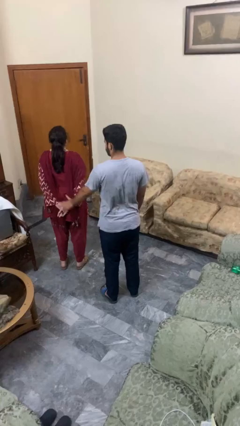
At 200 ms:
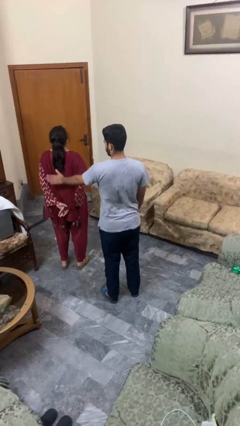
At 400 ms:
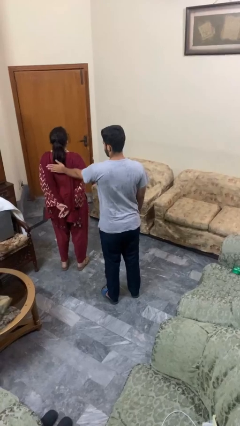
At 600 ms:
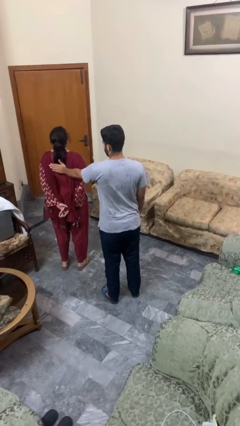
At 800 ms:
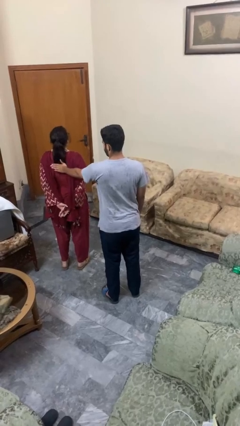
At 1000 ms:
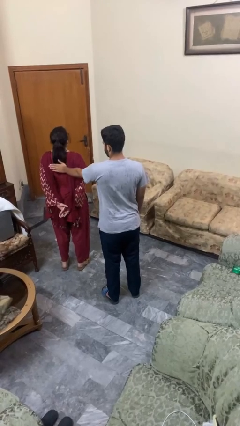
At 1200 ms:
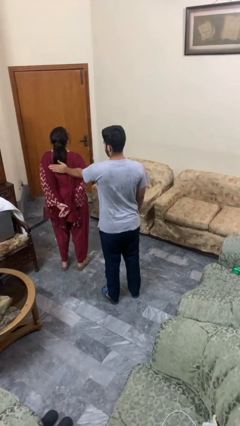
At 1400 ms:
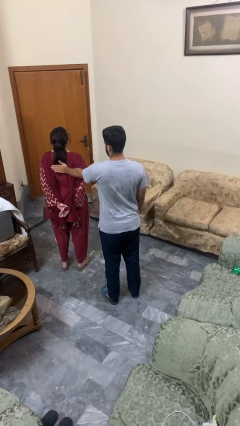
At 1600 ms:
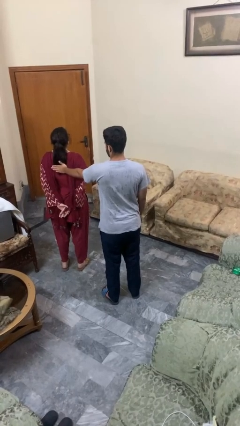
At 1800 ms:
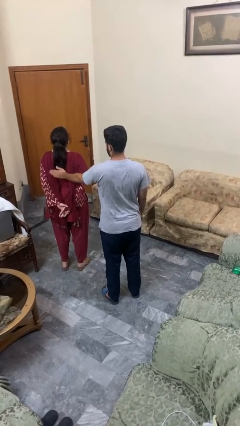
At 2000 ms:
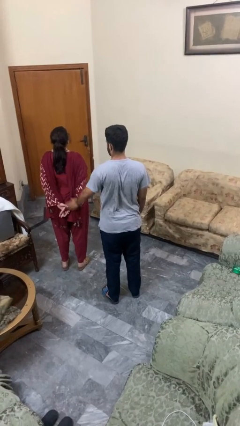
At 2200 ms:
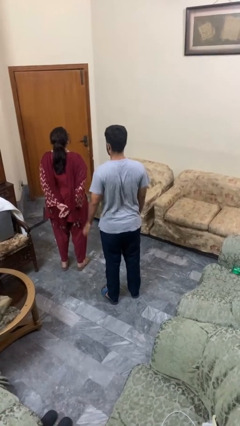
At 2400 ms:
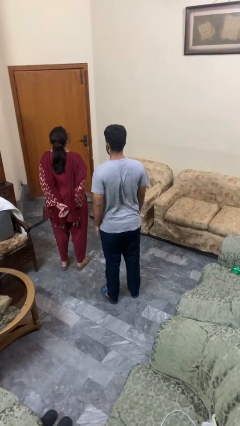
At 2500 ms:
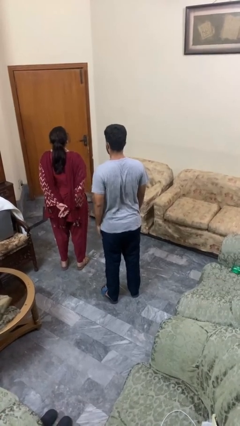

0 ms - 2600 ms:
person touches back of person

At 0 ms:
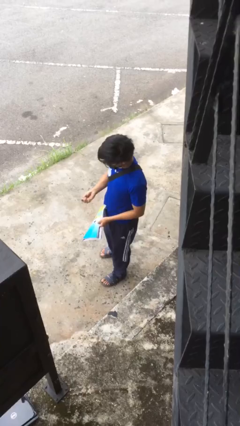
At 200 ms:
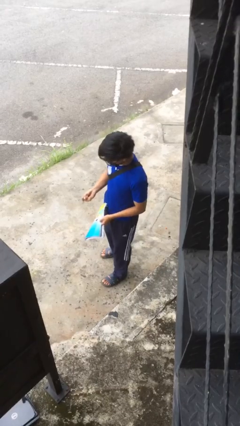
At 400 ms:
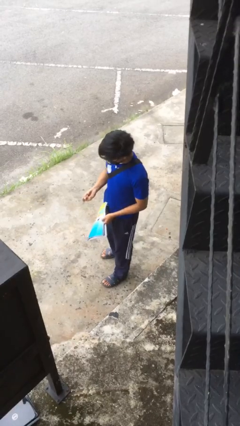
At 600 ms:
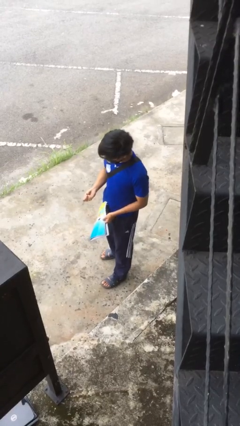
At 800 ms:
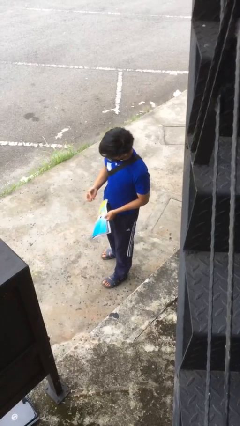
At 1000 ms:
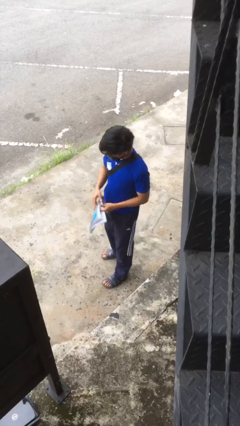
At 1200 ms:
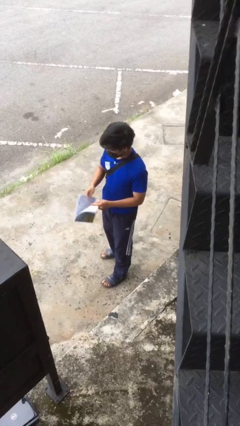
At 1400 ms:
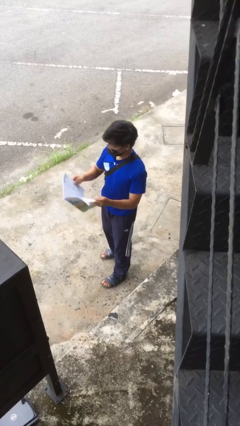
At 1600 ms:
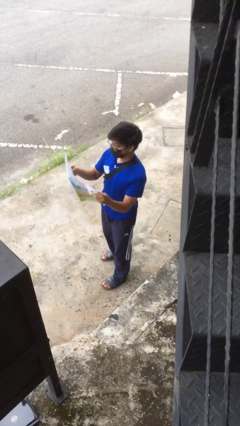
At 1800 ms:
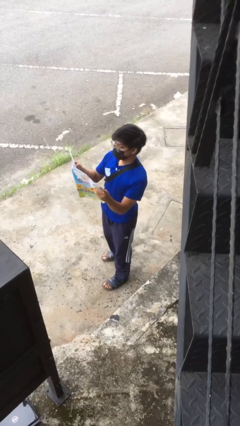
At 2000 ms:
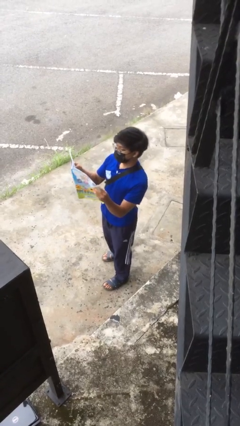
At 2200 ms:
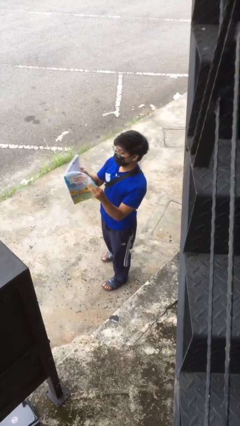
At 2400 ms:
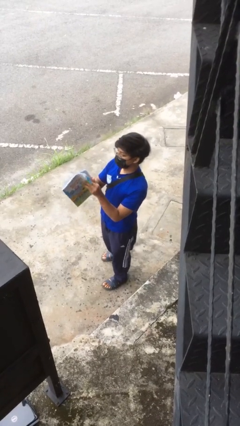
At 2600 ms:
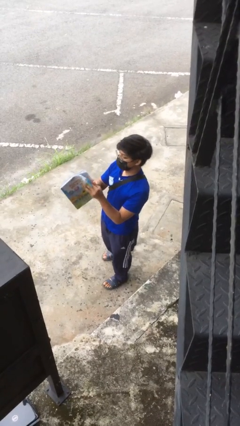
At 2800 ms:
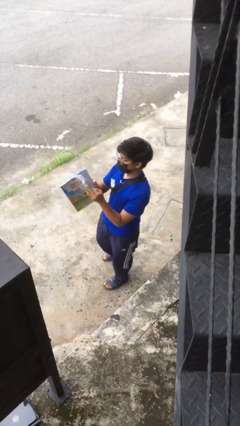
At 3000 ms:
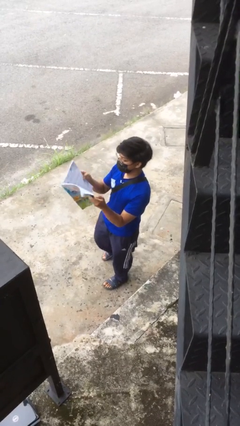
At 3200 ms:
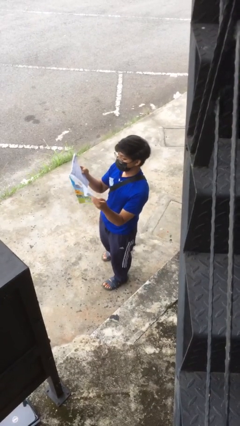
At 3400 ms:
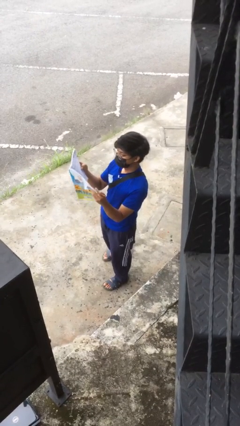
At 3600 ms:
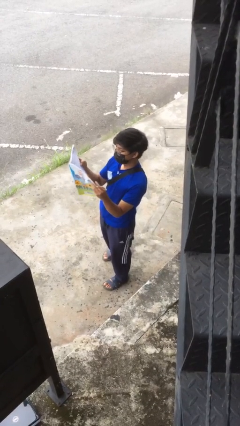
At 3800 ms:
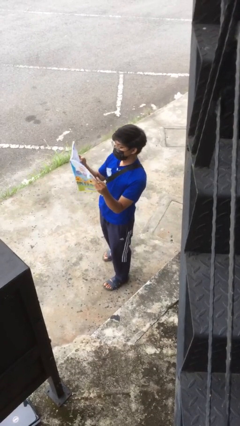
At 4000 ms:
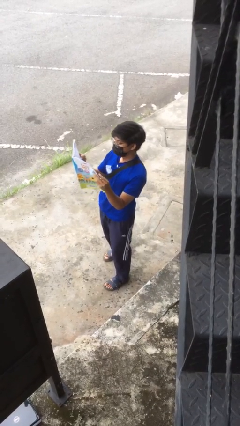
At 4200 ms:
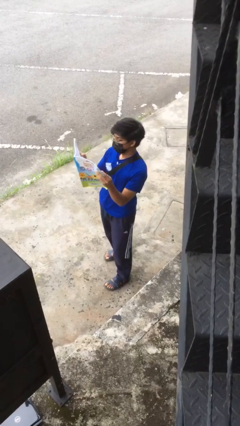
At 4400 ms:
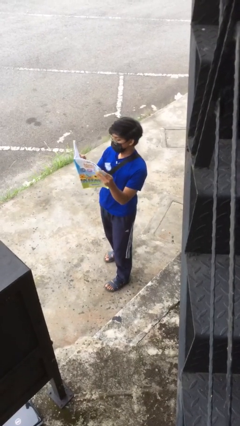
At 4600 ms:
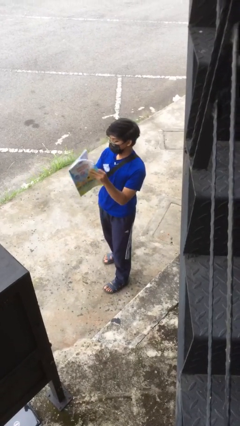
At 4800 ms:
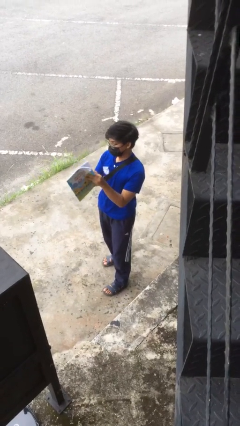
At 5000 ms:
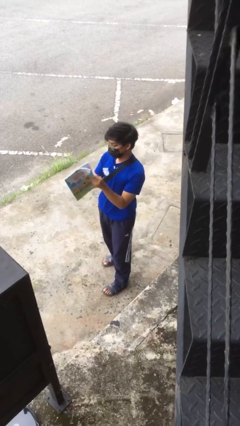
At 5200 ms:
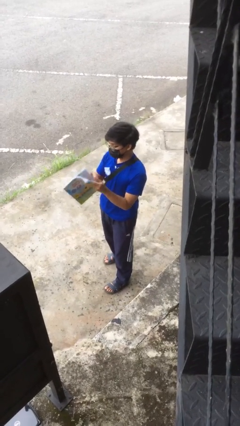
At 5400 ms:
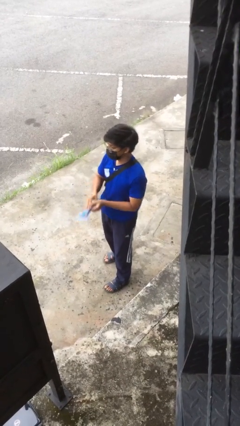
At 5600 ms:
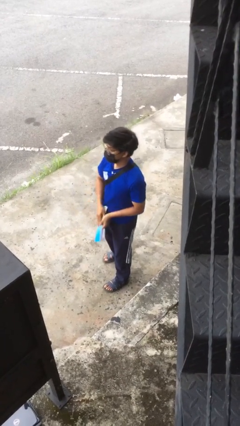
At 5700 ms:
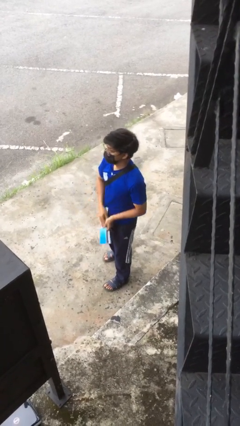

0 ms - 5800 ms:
person reads document

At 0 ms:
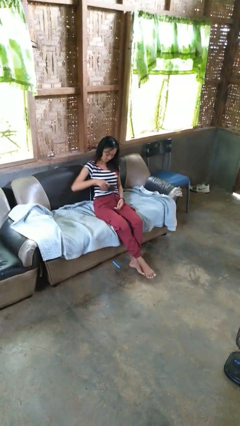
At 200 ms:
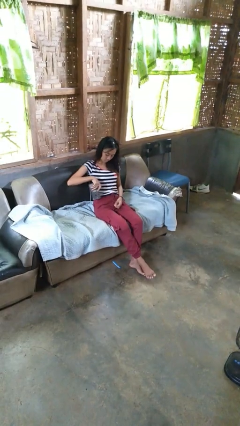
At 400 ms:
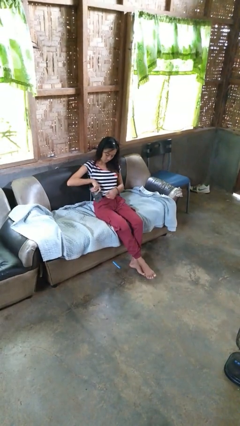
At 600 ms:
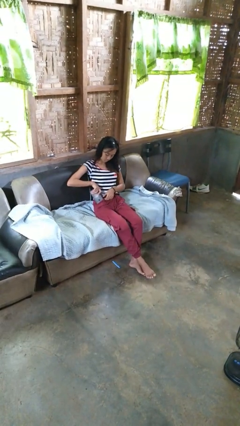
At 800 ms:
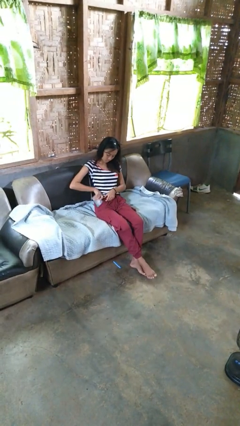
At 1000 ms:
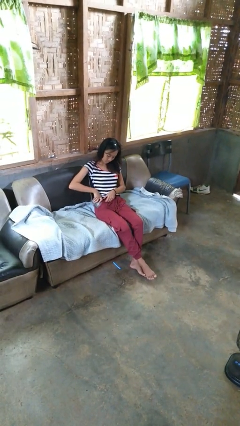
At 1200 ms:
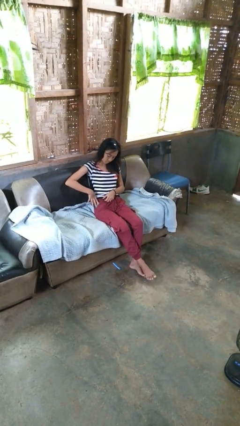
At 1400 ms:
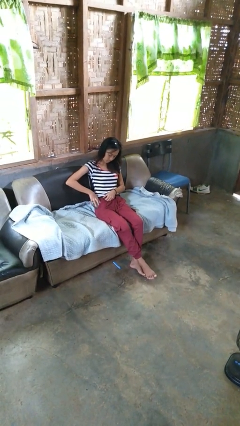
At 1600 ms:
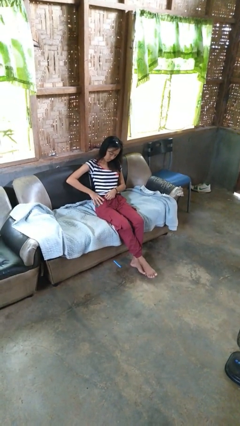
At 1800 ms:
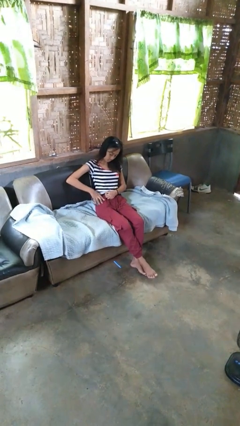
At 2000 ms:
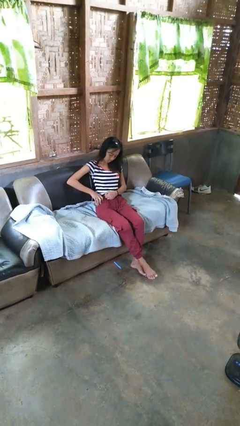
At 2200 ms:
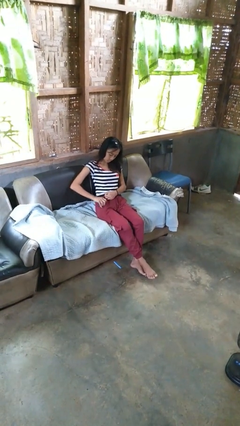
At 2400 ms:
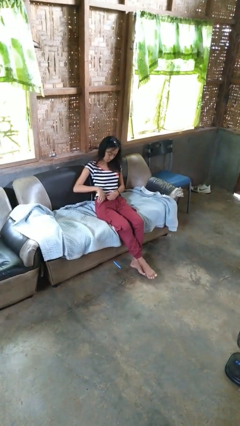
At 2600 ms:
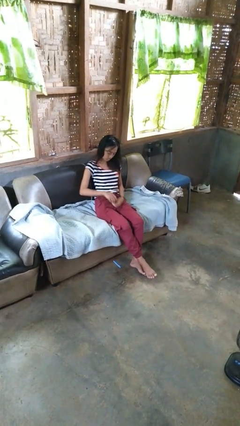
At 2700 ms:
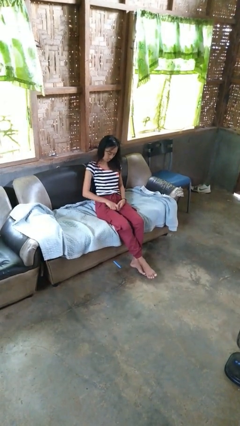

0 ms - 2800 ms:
person puts phone into pocket

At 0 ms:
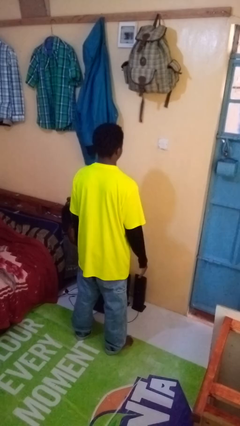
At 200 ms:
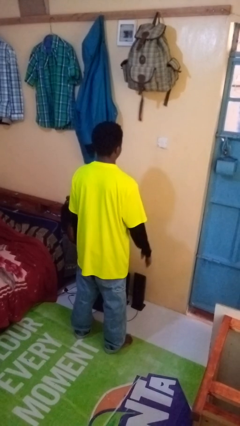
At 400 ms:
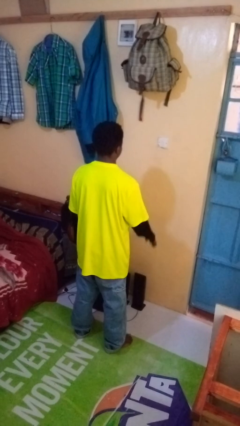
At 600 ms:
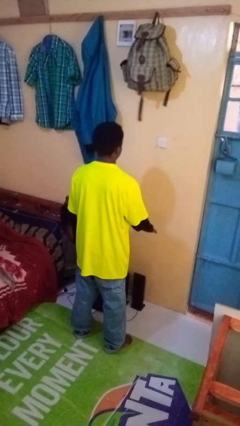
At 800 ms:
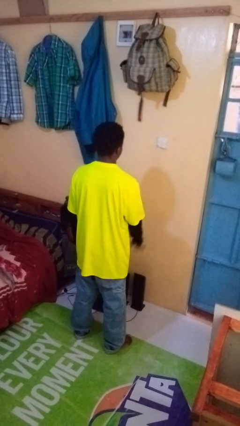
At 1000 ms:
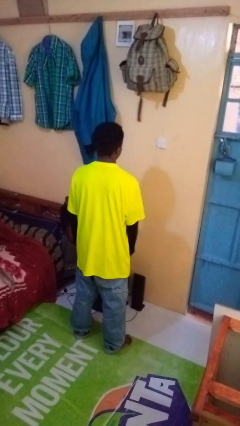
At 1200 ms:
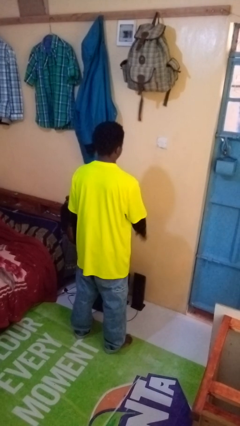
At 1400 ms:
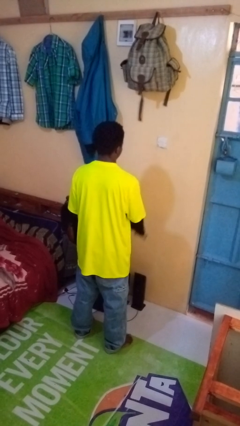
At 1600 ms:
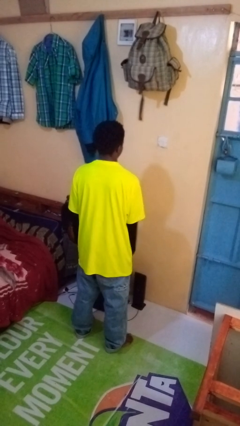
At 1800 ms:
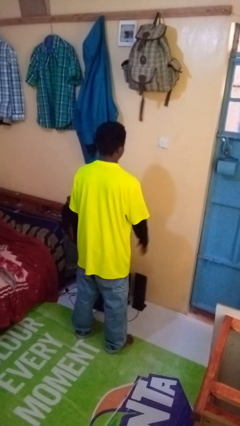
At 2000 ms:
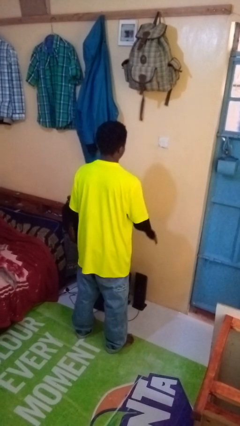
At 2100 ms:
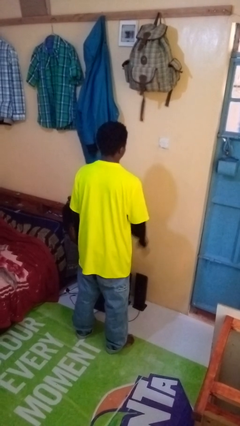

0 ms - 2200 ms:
person slaps hands on thighs

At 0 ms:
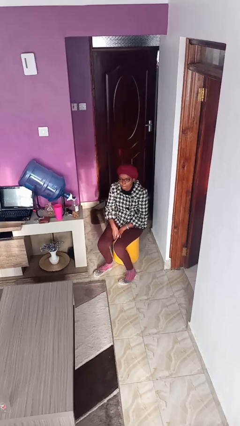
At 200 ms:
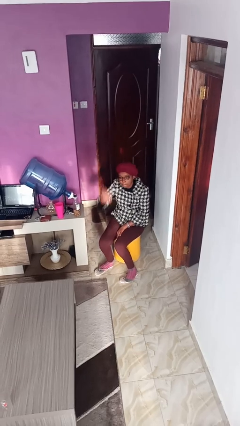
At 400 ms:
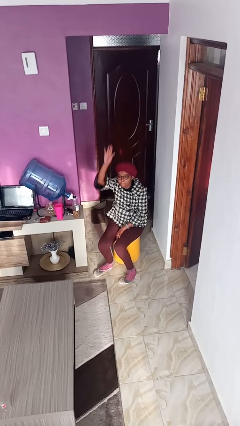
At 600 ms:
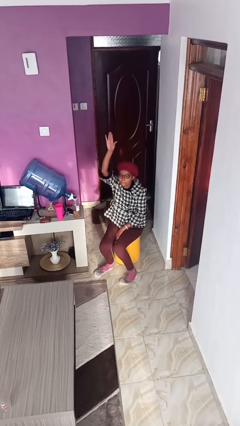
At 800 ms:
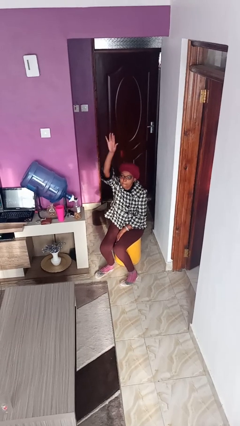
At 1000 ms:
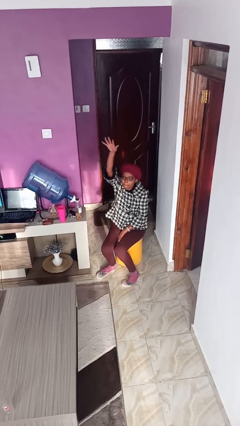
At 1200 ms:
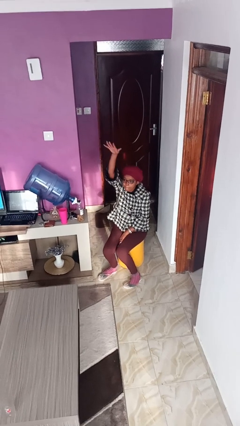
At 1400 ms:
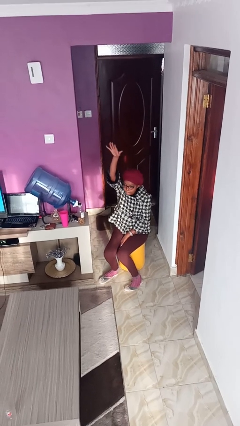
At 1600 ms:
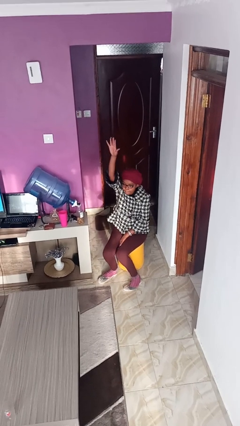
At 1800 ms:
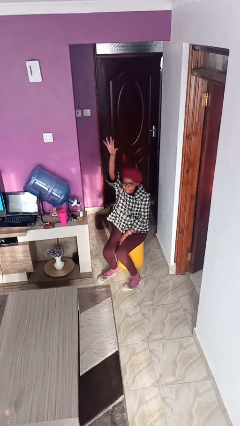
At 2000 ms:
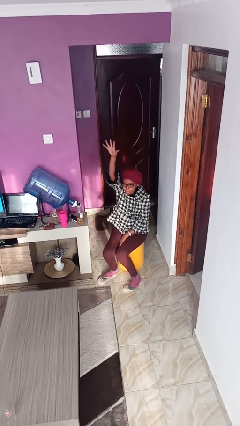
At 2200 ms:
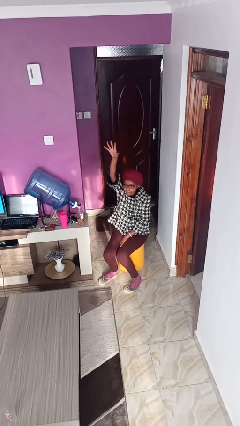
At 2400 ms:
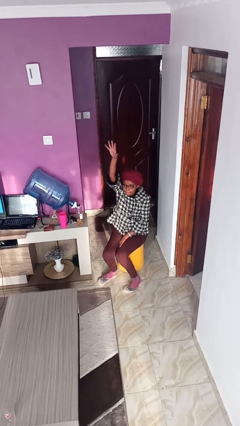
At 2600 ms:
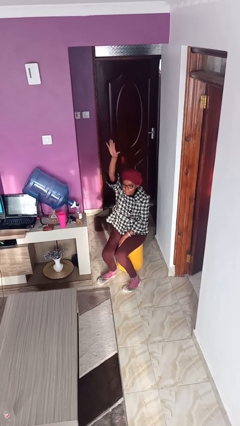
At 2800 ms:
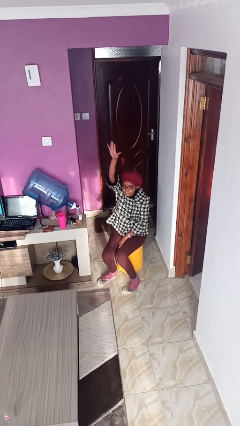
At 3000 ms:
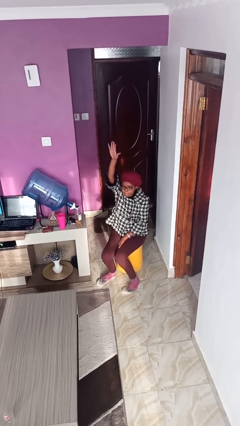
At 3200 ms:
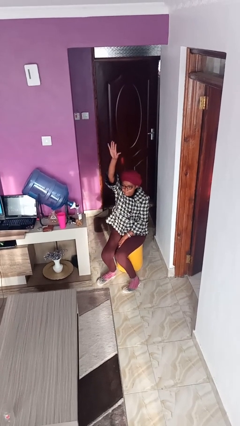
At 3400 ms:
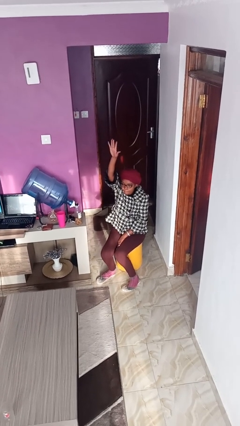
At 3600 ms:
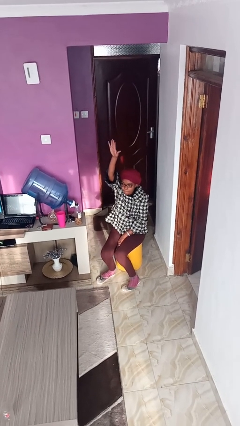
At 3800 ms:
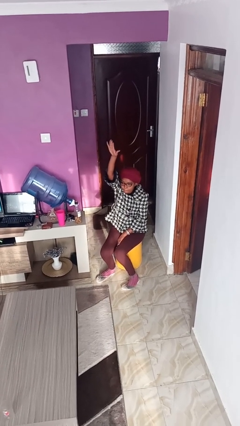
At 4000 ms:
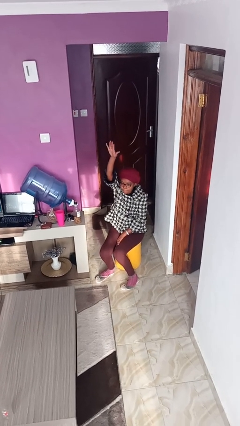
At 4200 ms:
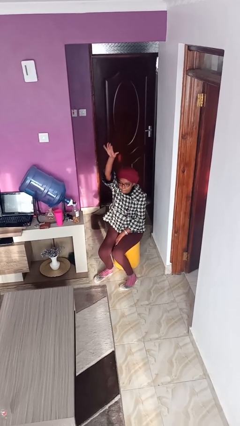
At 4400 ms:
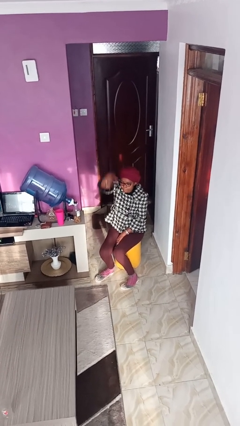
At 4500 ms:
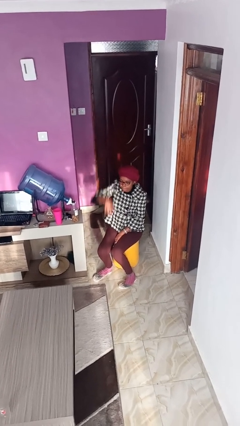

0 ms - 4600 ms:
person gestures raise hand
